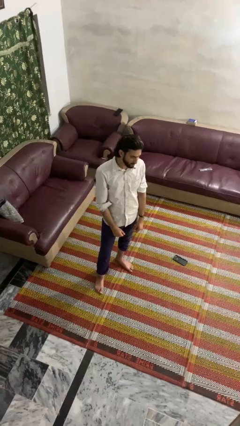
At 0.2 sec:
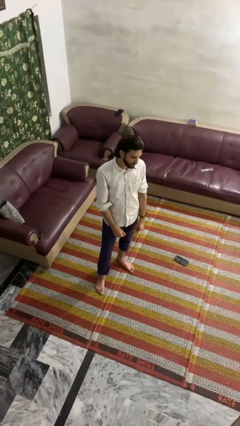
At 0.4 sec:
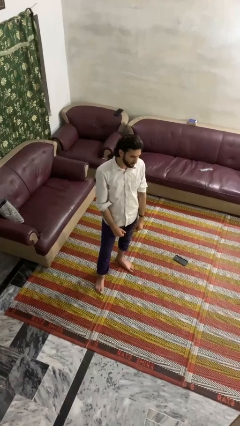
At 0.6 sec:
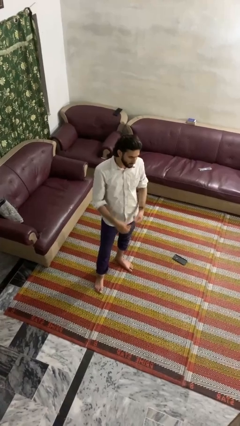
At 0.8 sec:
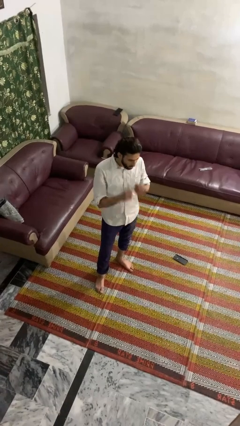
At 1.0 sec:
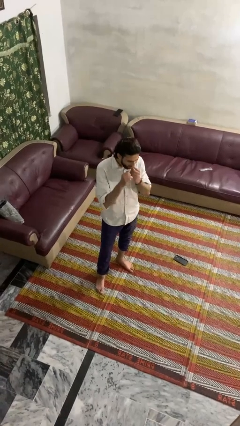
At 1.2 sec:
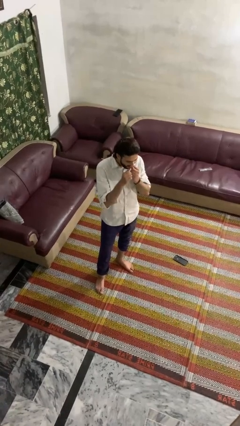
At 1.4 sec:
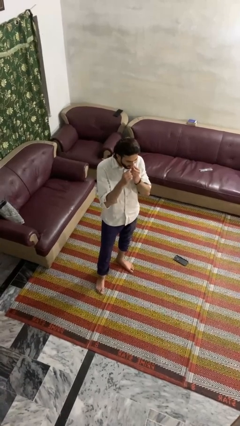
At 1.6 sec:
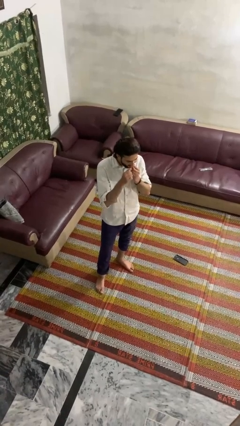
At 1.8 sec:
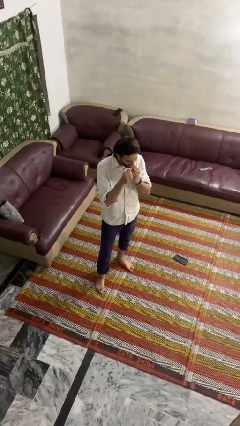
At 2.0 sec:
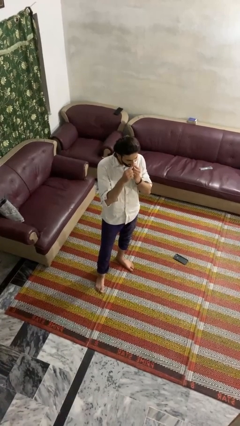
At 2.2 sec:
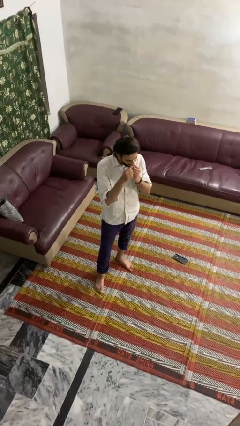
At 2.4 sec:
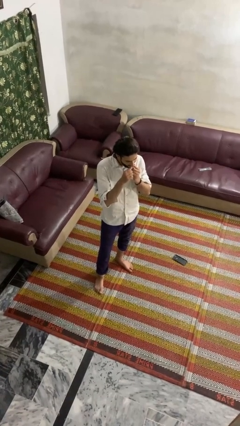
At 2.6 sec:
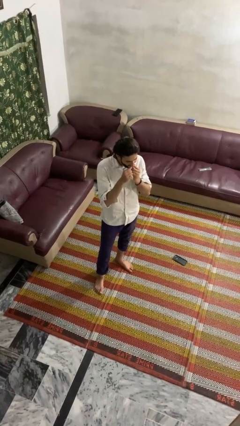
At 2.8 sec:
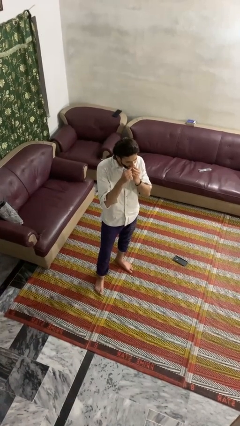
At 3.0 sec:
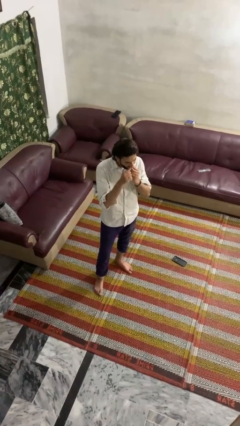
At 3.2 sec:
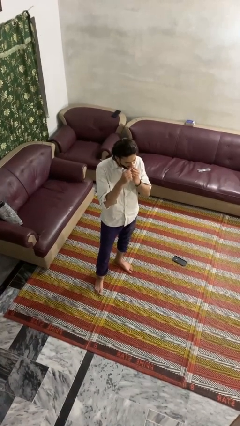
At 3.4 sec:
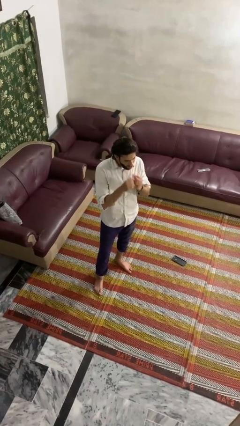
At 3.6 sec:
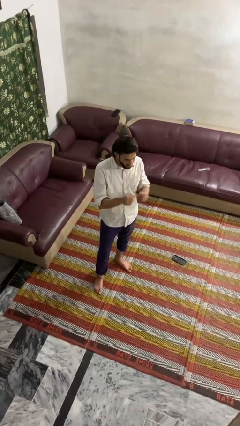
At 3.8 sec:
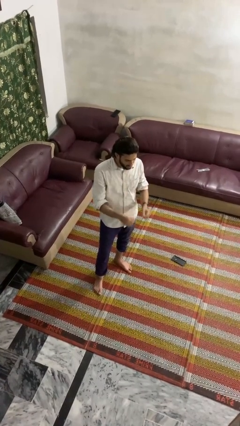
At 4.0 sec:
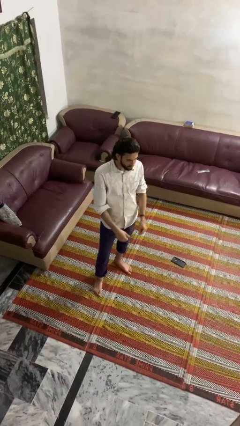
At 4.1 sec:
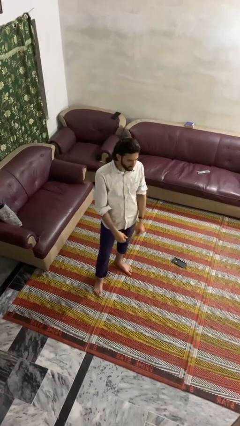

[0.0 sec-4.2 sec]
person flosses

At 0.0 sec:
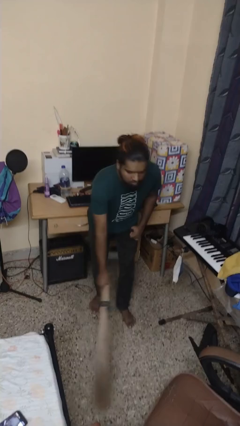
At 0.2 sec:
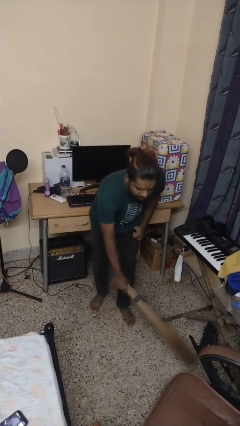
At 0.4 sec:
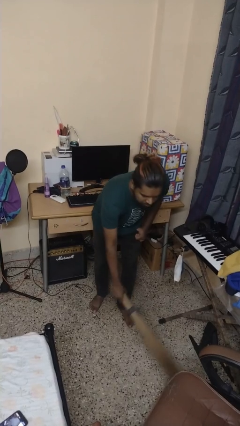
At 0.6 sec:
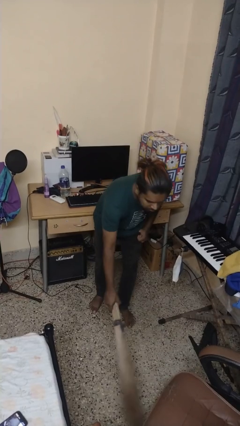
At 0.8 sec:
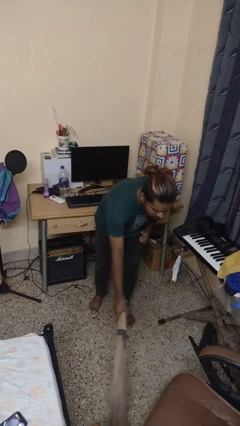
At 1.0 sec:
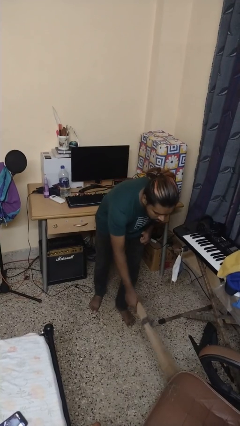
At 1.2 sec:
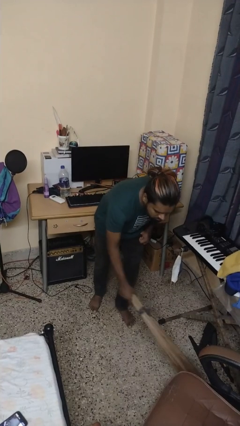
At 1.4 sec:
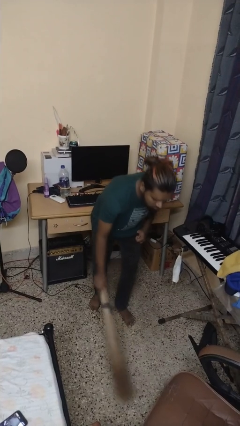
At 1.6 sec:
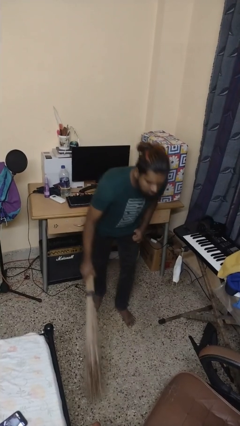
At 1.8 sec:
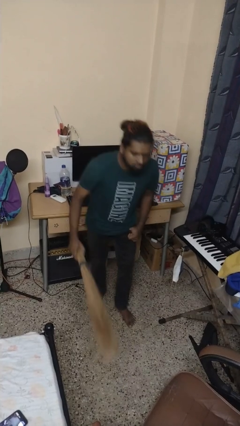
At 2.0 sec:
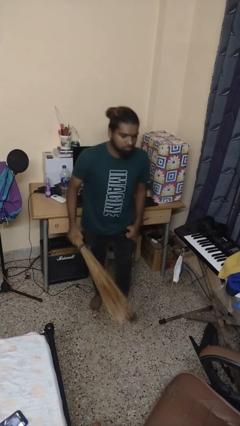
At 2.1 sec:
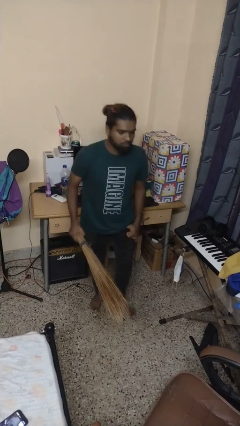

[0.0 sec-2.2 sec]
person sweeps floor

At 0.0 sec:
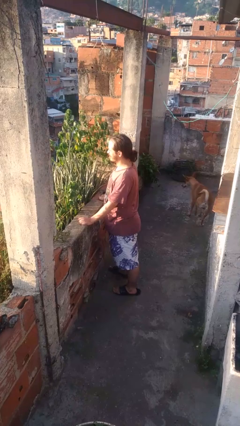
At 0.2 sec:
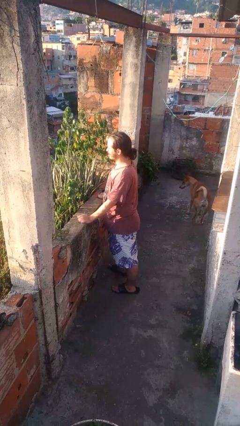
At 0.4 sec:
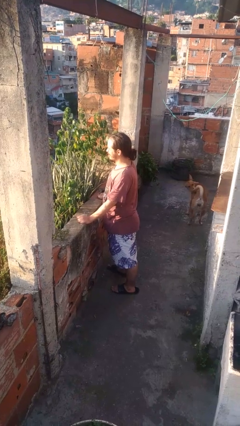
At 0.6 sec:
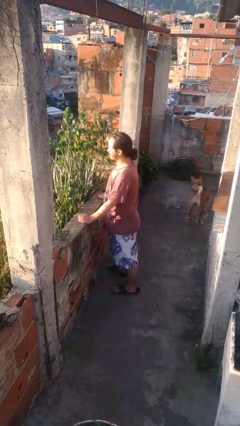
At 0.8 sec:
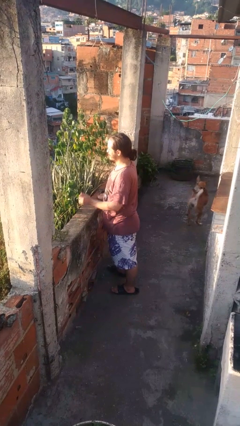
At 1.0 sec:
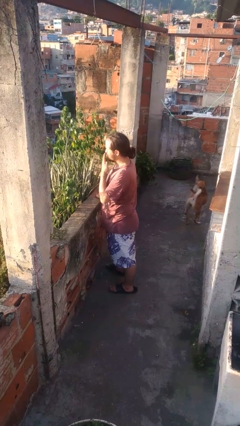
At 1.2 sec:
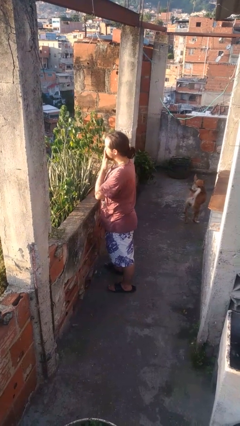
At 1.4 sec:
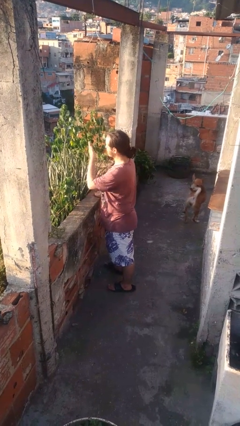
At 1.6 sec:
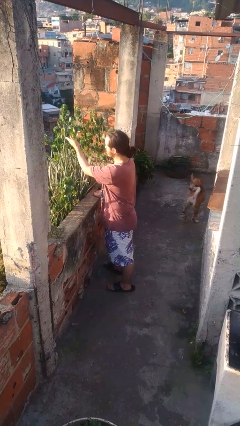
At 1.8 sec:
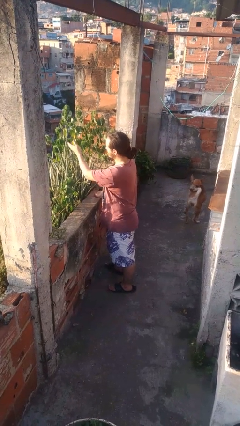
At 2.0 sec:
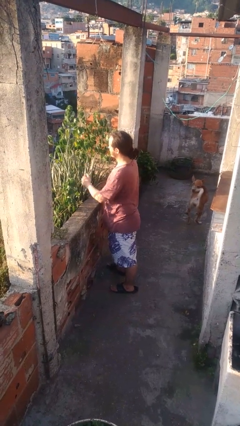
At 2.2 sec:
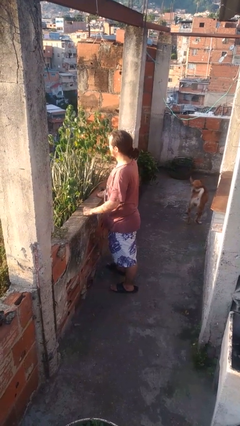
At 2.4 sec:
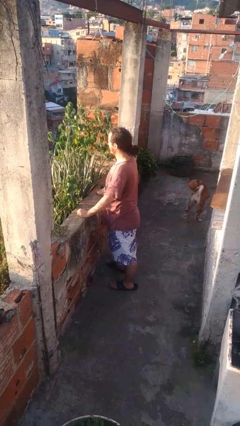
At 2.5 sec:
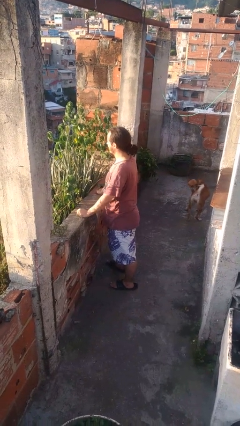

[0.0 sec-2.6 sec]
person gestures blow kiss

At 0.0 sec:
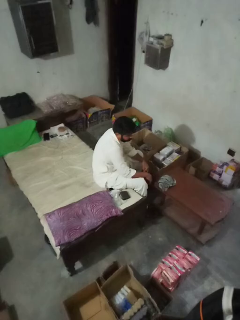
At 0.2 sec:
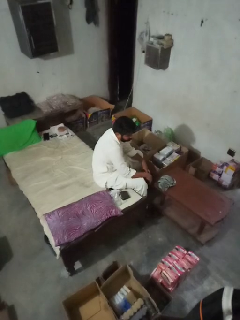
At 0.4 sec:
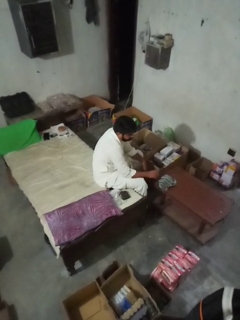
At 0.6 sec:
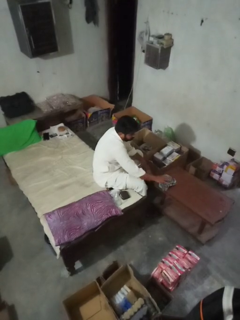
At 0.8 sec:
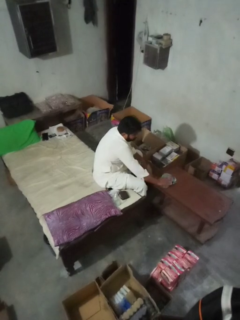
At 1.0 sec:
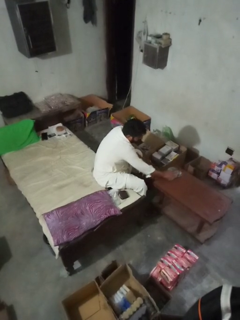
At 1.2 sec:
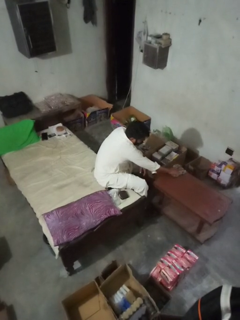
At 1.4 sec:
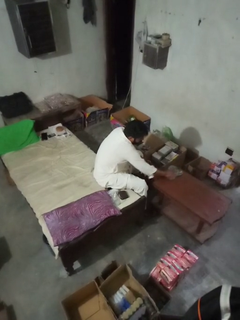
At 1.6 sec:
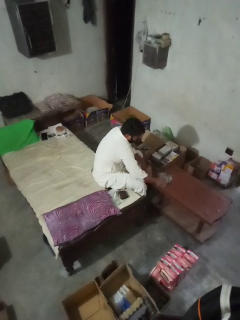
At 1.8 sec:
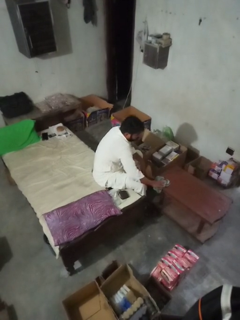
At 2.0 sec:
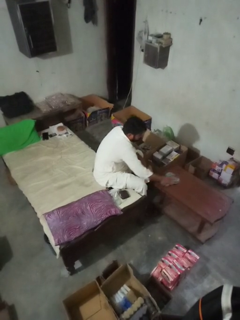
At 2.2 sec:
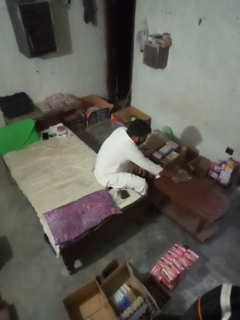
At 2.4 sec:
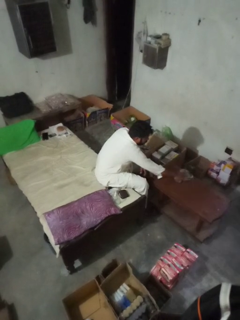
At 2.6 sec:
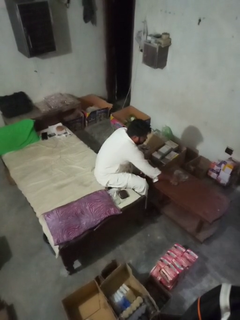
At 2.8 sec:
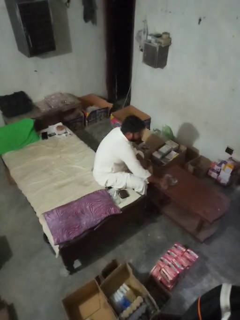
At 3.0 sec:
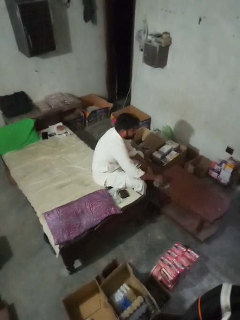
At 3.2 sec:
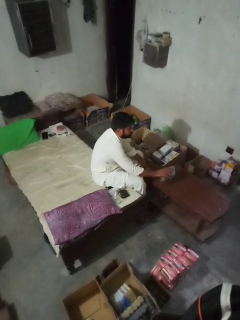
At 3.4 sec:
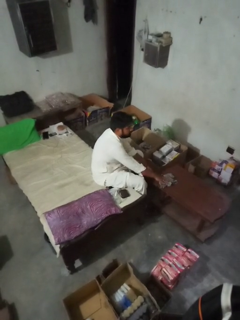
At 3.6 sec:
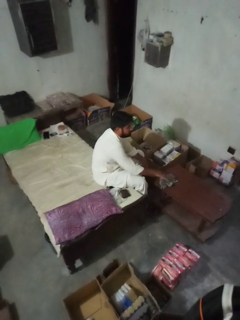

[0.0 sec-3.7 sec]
person cleans table with rag

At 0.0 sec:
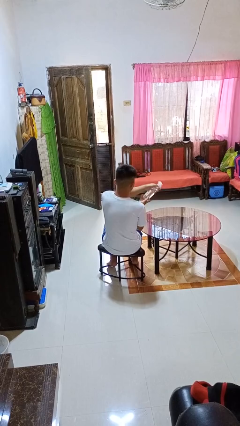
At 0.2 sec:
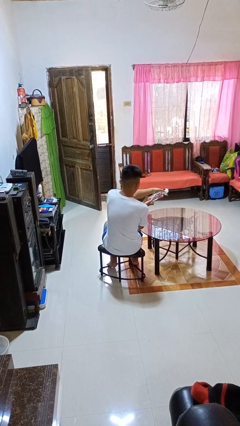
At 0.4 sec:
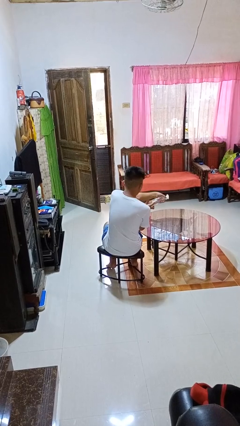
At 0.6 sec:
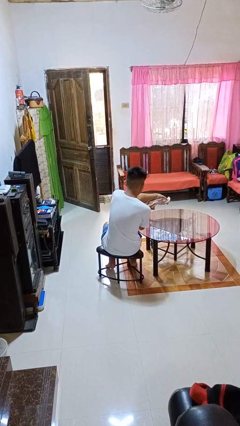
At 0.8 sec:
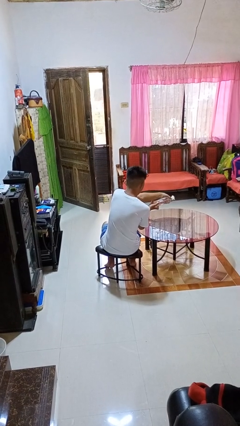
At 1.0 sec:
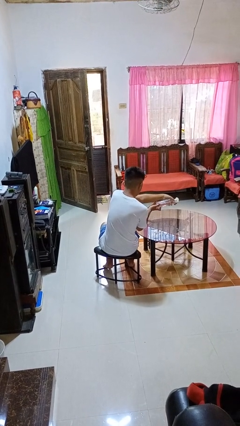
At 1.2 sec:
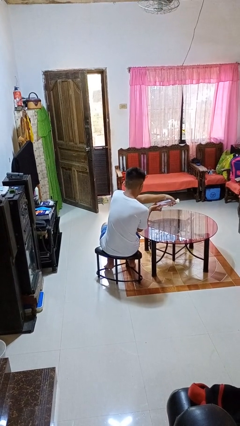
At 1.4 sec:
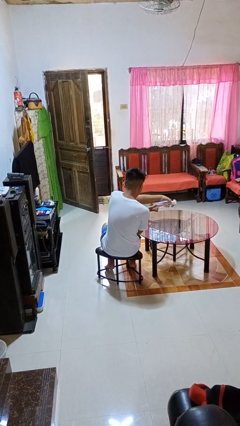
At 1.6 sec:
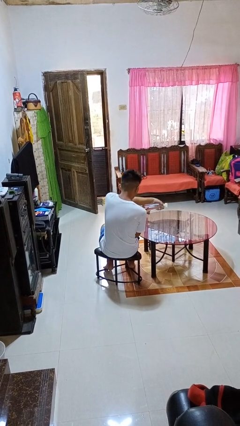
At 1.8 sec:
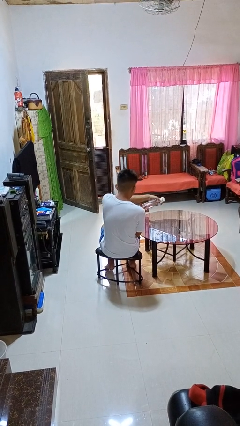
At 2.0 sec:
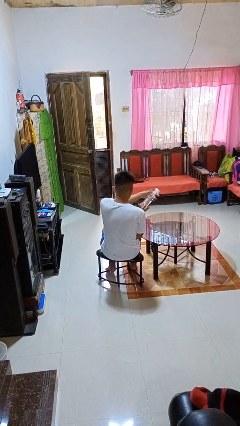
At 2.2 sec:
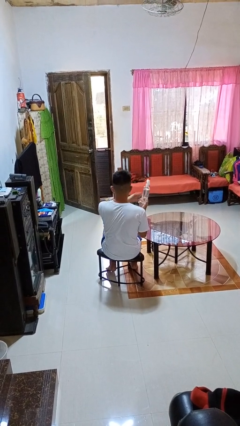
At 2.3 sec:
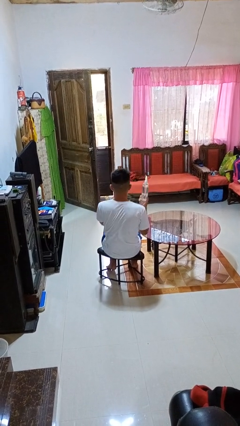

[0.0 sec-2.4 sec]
person sprays from bottle

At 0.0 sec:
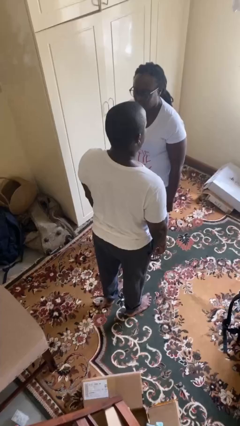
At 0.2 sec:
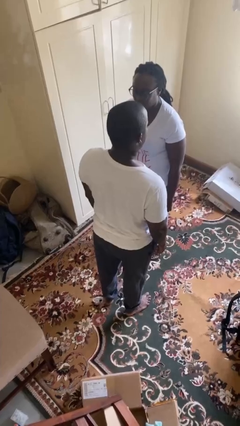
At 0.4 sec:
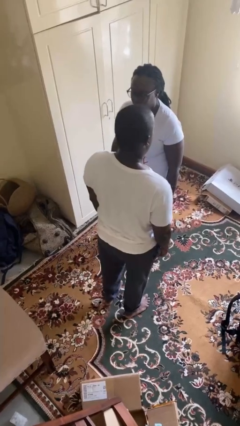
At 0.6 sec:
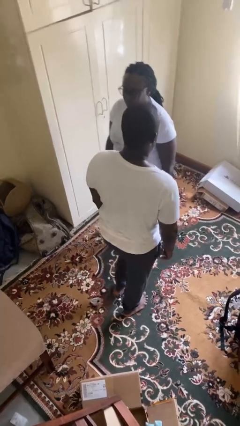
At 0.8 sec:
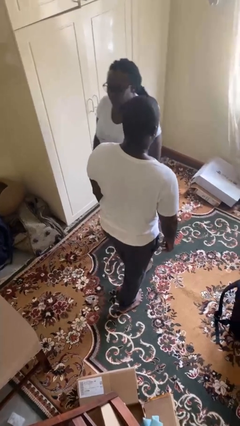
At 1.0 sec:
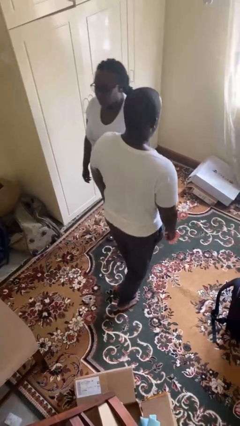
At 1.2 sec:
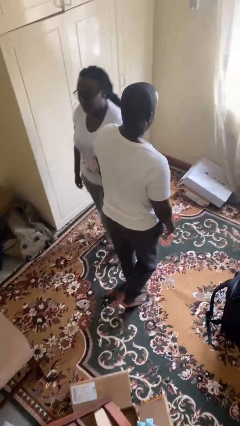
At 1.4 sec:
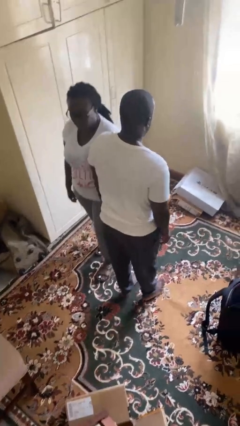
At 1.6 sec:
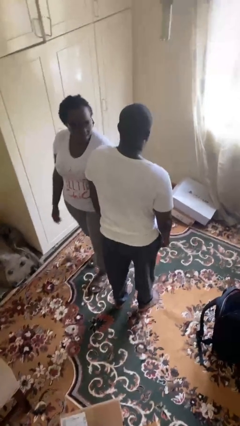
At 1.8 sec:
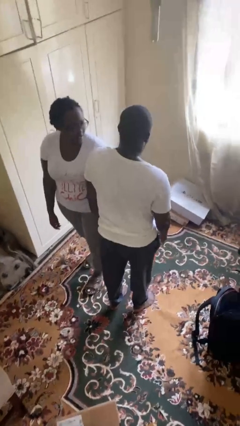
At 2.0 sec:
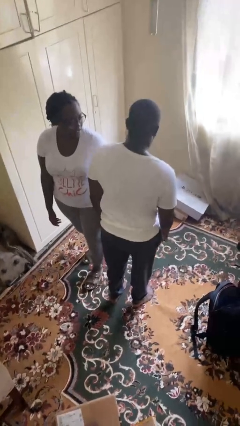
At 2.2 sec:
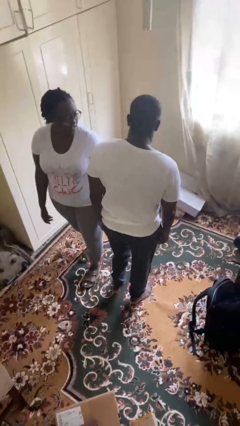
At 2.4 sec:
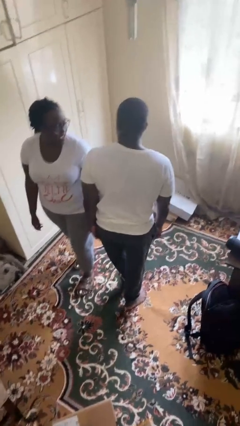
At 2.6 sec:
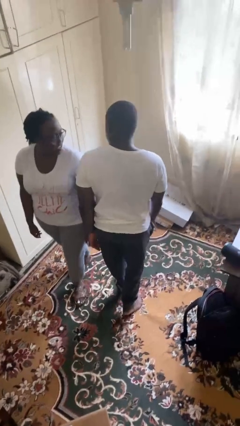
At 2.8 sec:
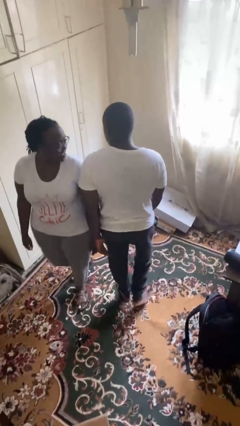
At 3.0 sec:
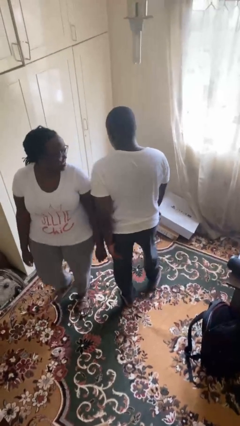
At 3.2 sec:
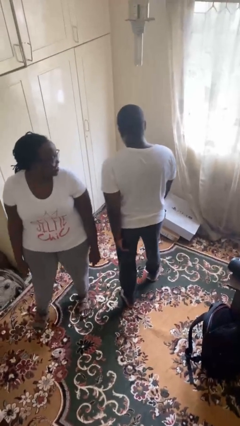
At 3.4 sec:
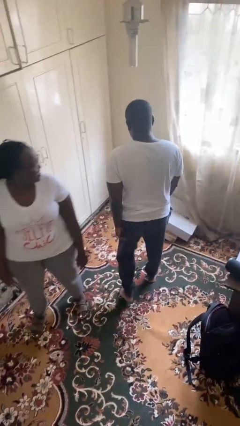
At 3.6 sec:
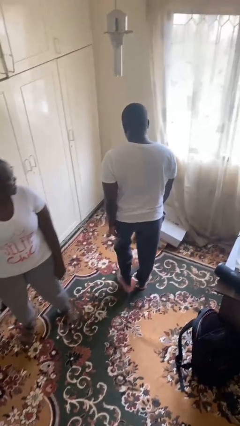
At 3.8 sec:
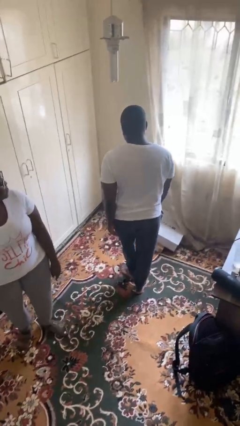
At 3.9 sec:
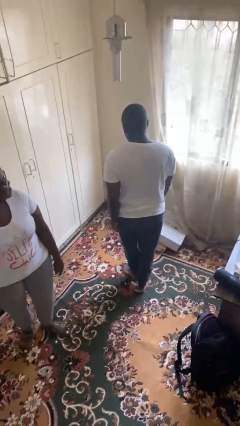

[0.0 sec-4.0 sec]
person bumps into person
